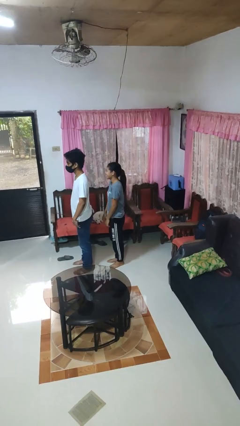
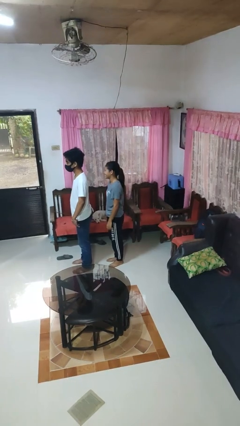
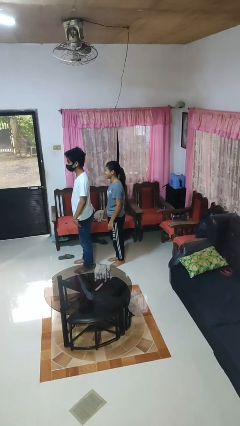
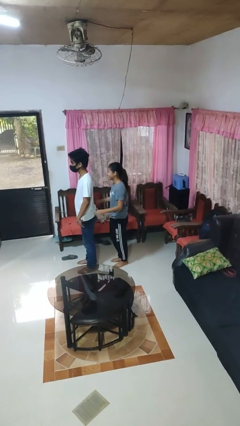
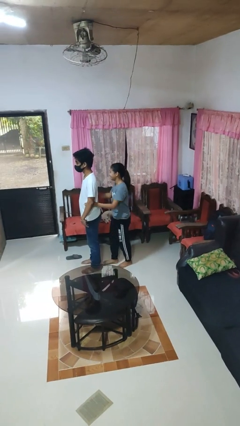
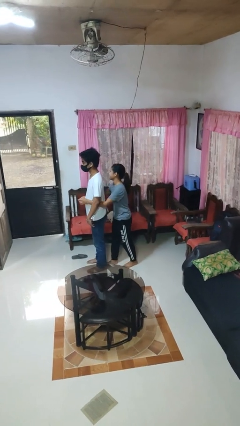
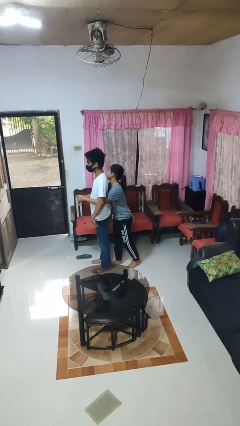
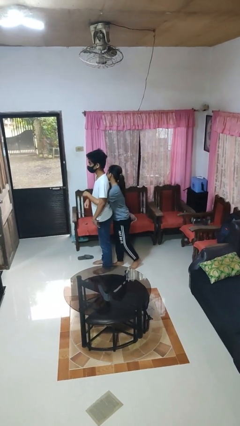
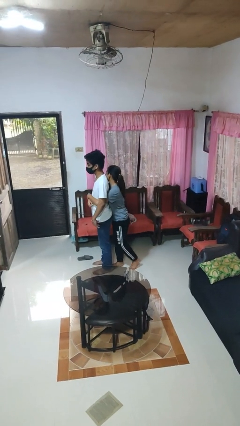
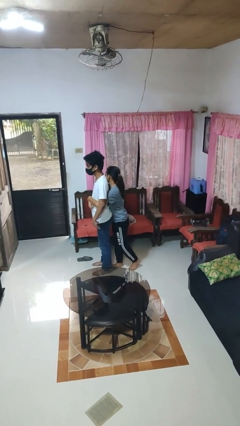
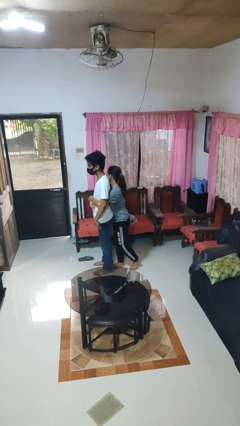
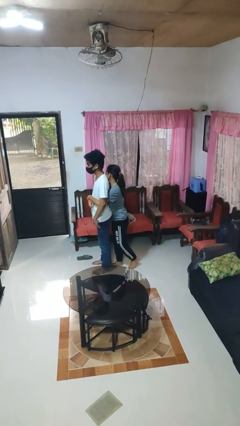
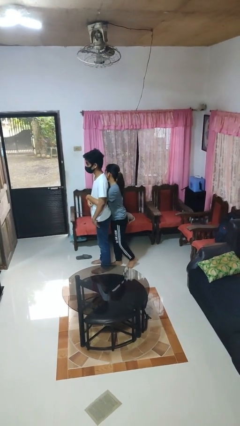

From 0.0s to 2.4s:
person hugs person from behind

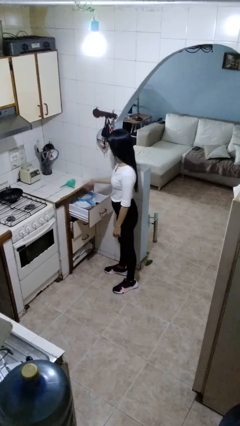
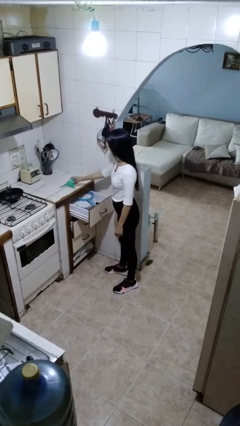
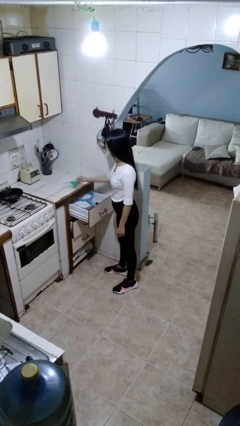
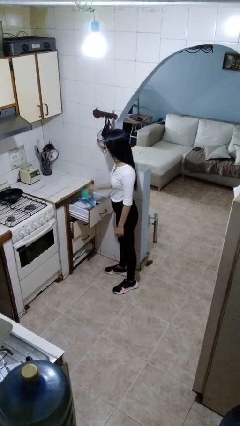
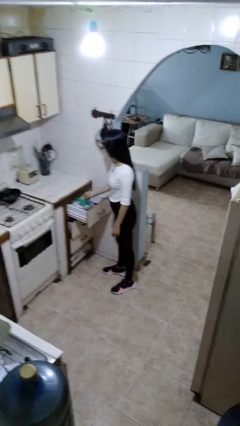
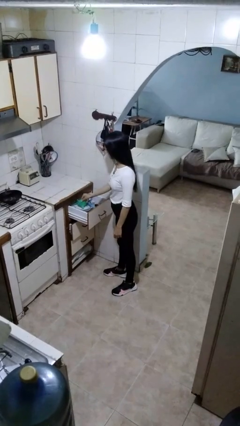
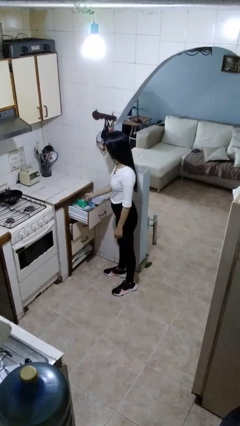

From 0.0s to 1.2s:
person puts object into kitchen drawer

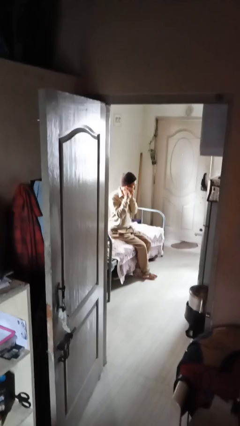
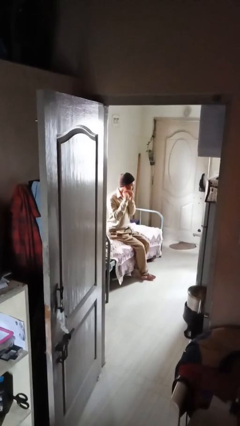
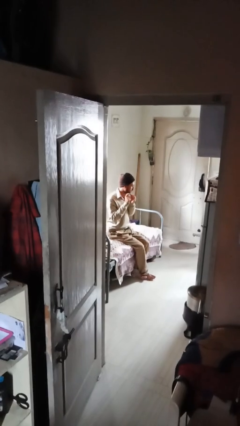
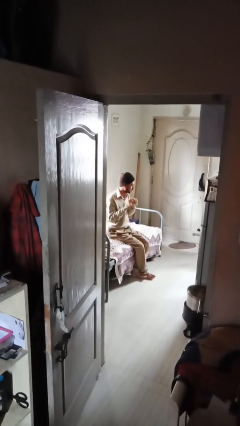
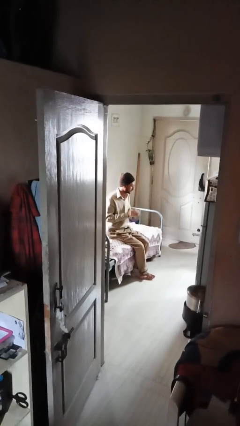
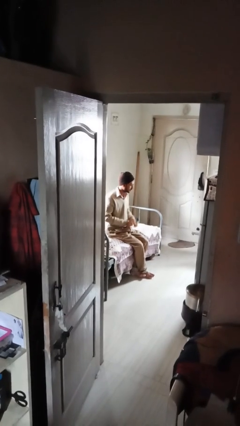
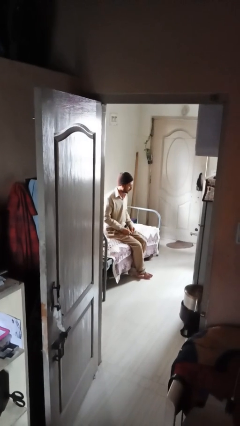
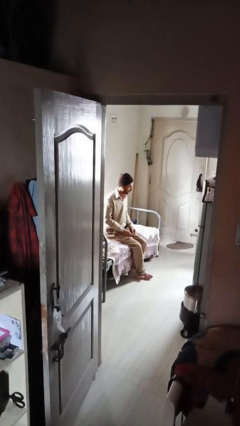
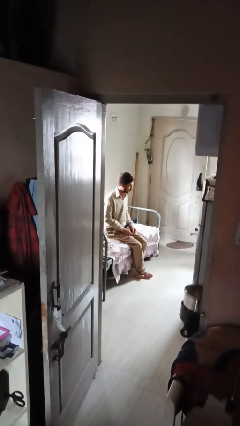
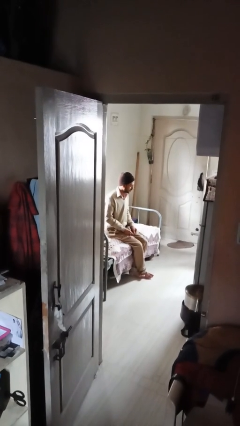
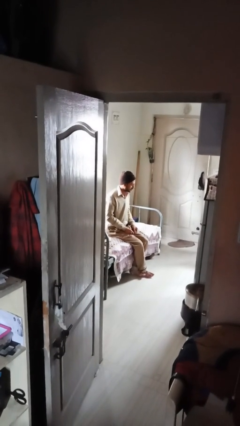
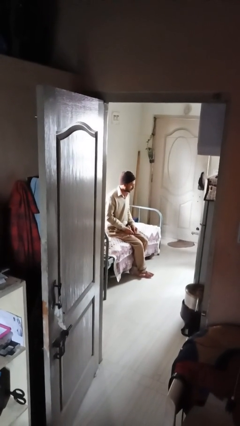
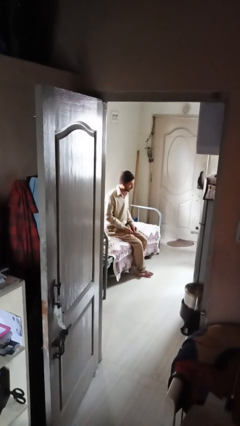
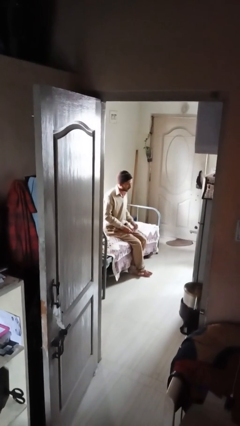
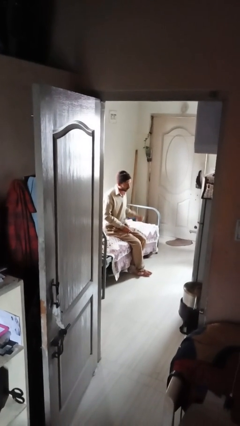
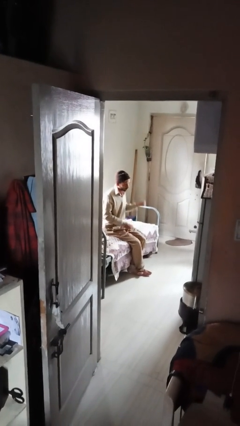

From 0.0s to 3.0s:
person takes off earrings

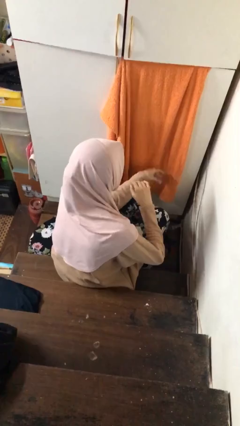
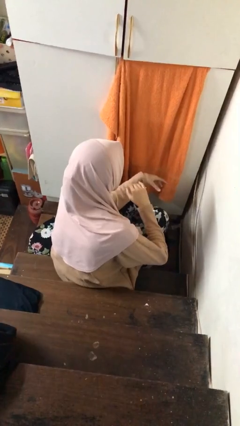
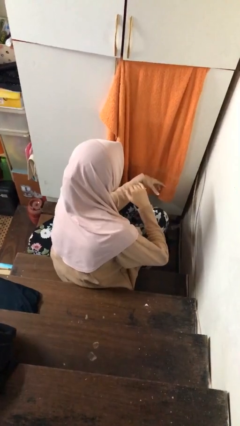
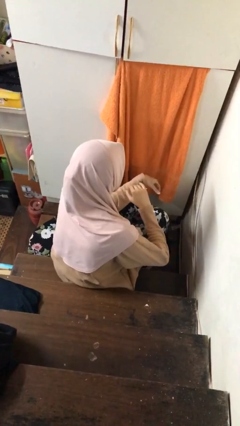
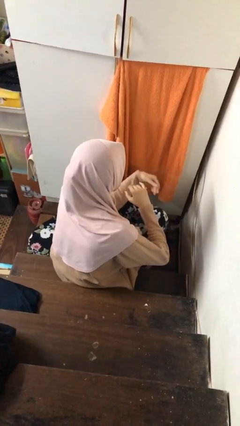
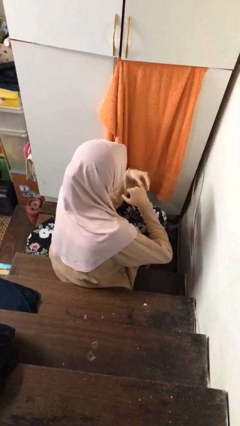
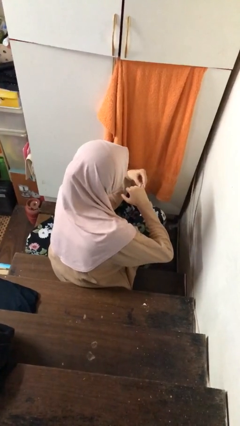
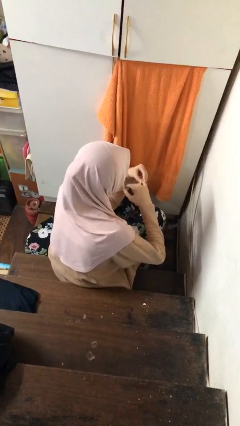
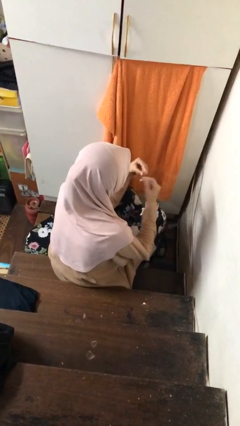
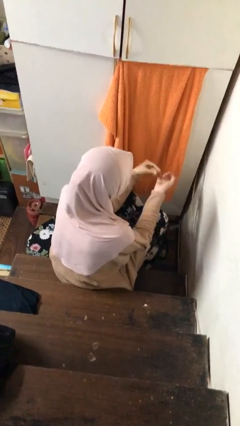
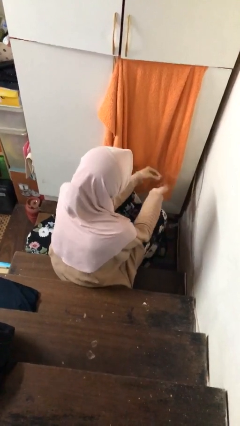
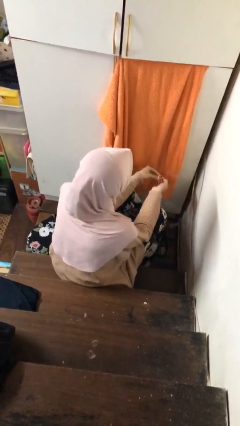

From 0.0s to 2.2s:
person takes off ring

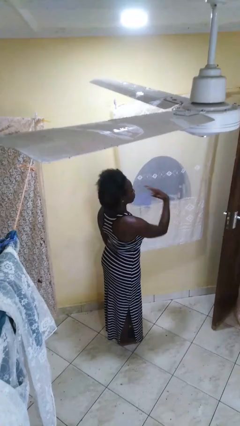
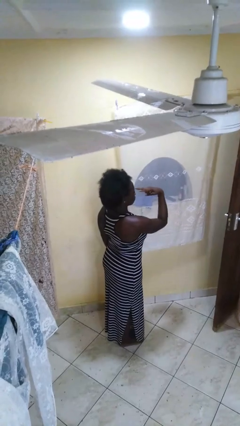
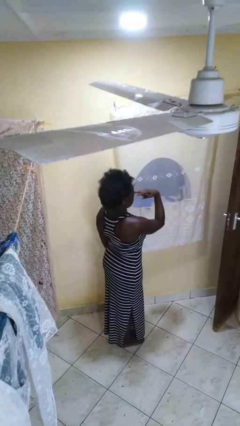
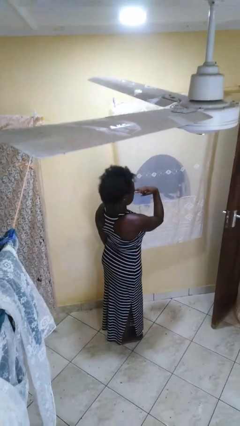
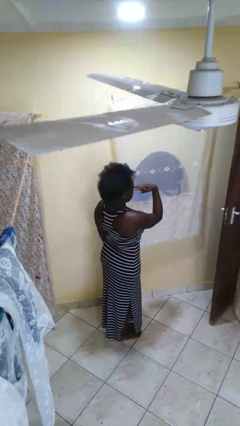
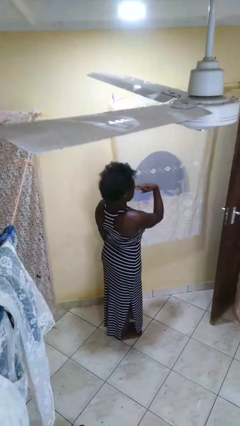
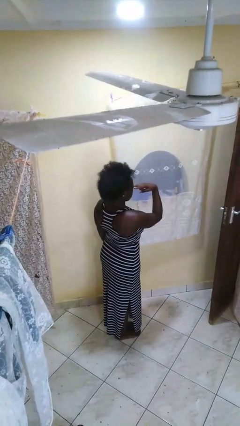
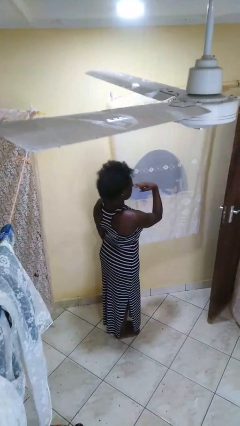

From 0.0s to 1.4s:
person gestures watch closely

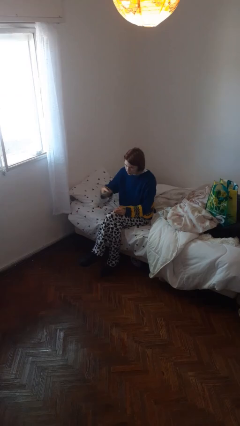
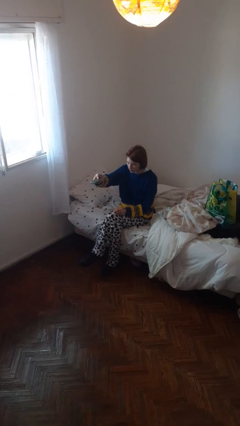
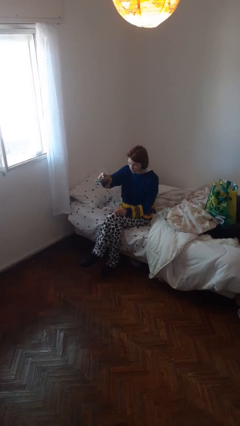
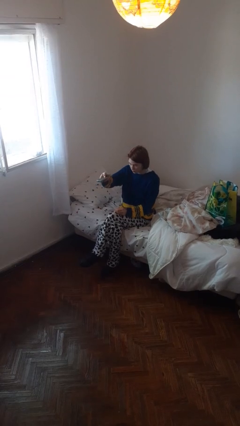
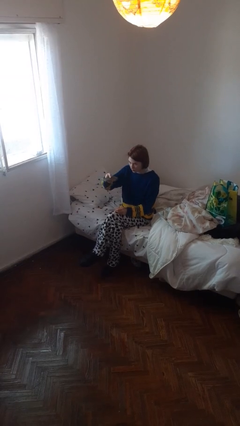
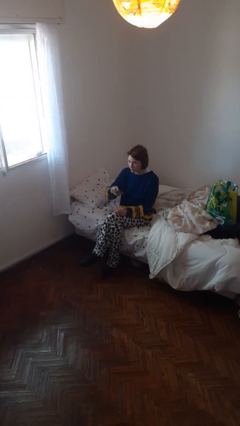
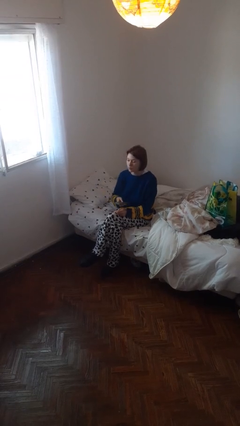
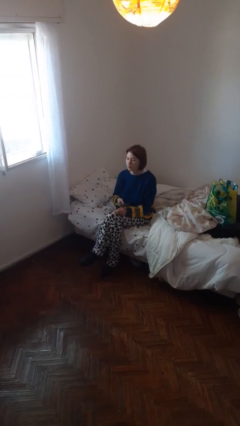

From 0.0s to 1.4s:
person uses television remote

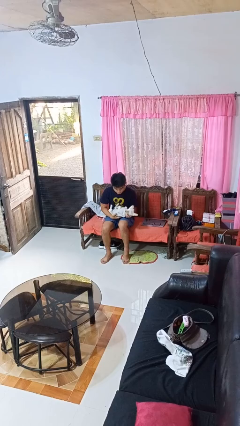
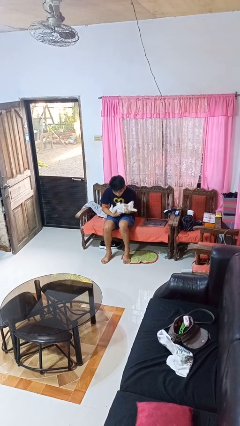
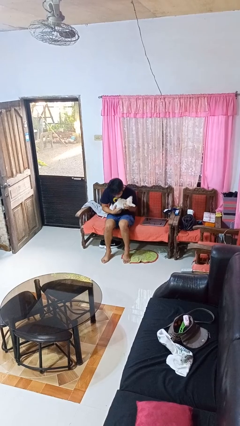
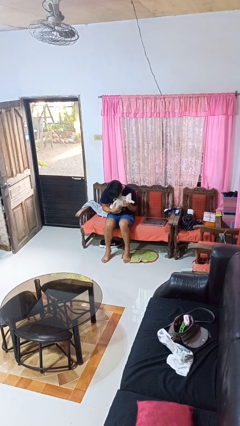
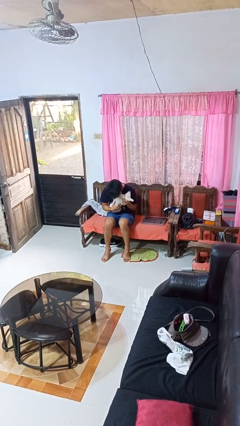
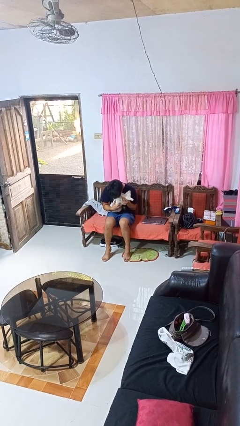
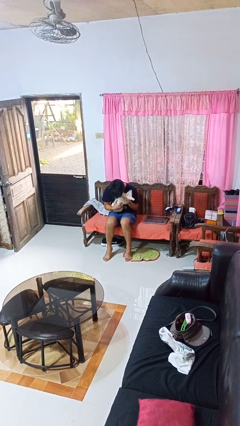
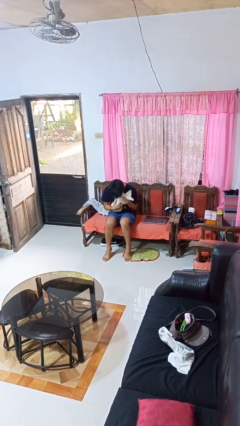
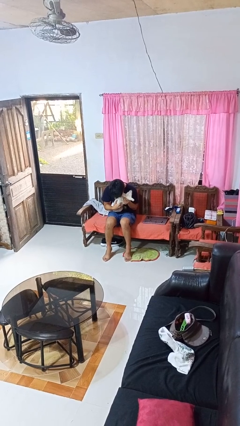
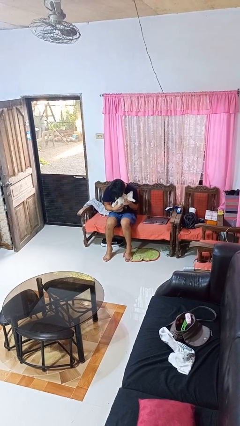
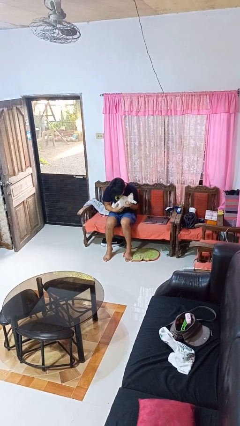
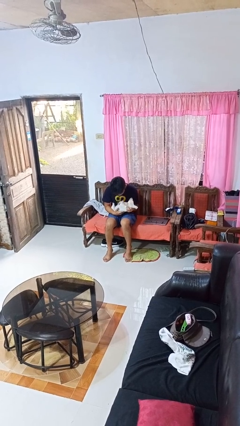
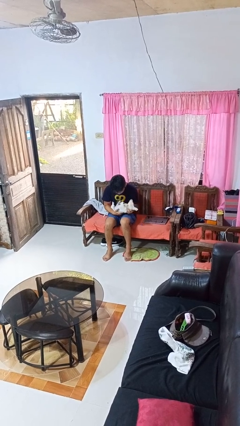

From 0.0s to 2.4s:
person hugs dog

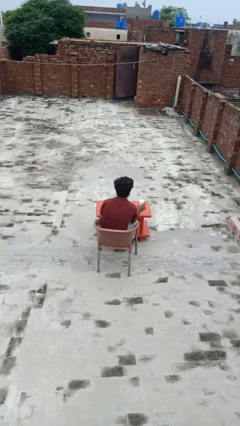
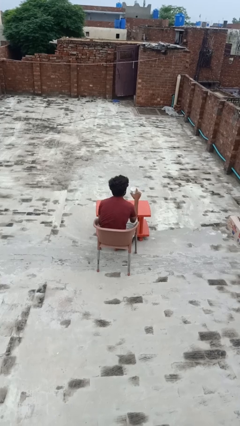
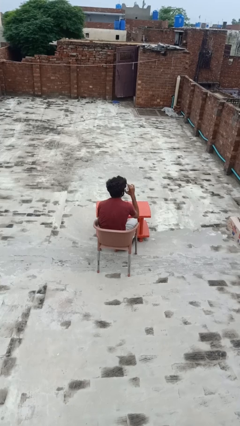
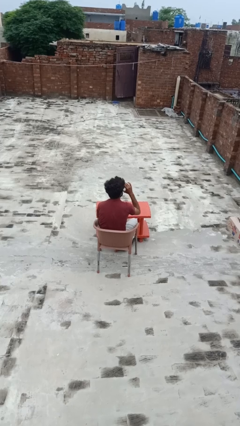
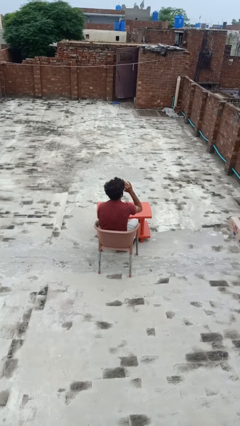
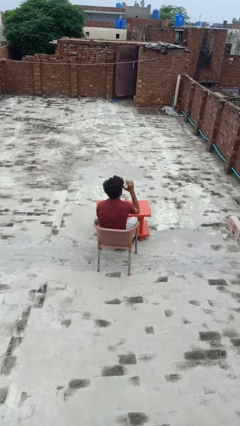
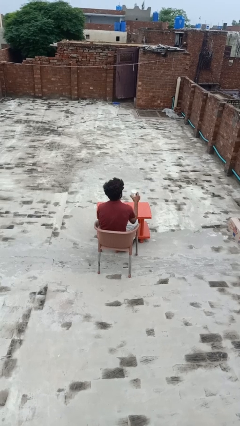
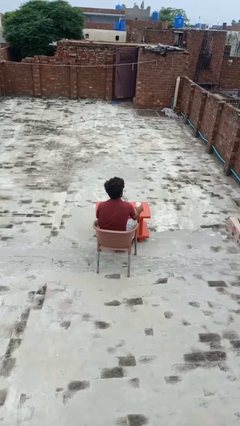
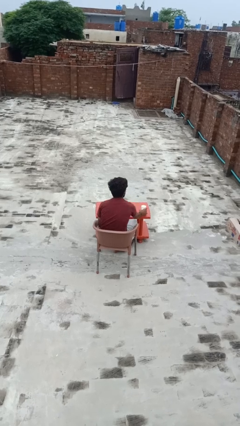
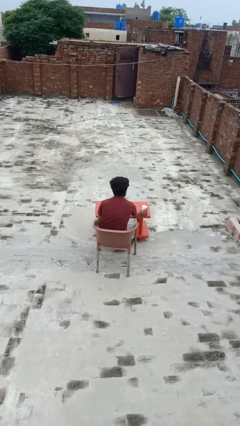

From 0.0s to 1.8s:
person drinks from mug

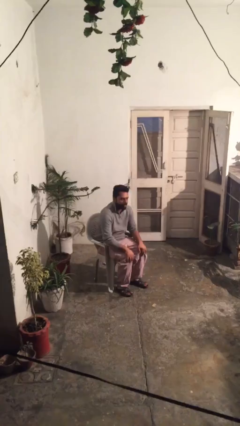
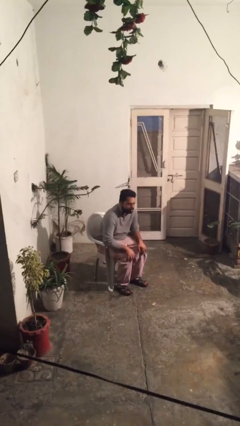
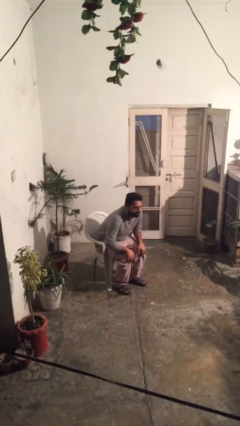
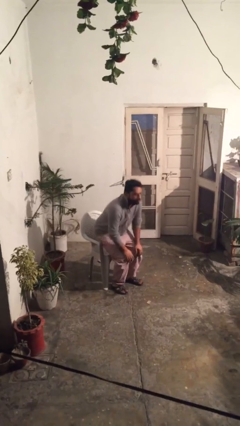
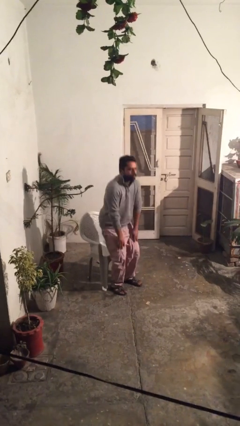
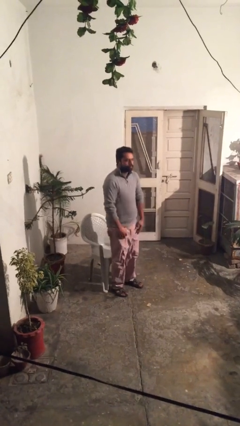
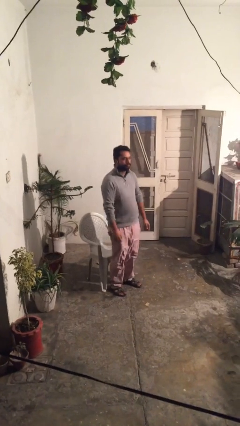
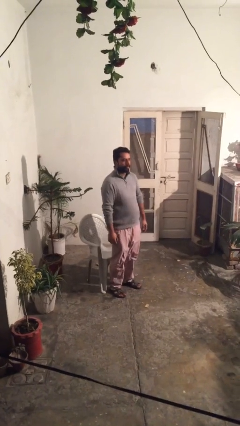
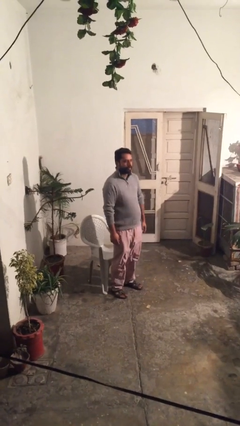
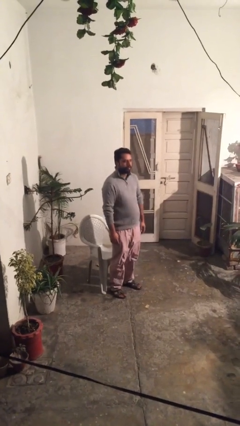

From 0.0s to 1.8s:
person stands up
